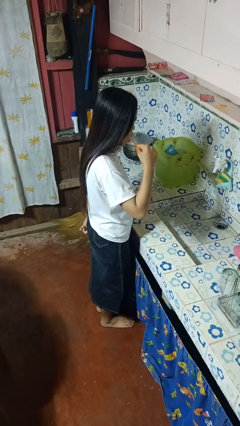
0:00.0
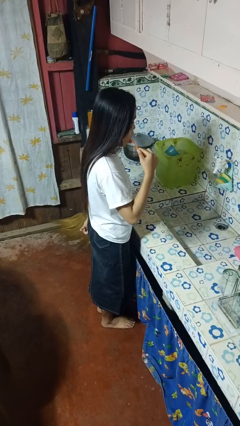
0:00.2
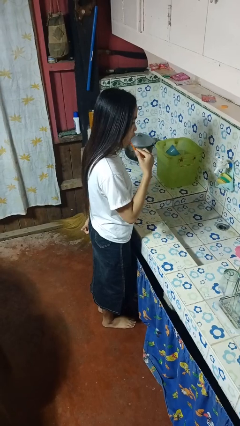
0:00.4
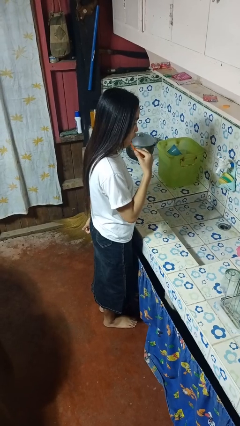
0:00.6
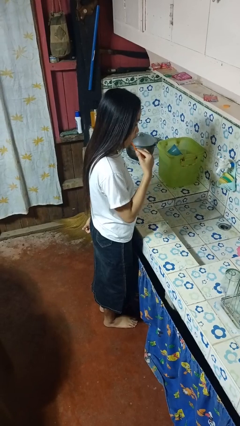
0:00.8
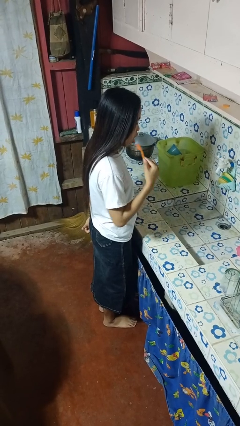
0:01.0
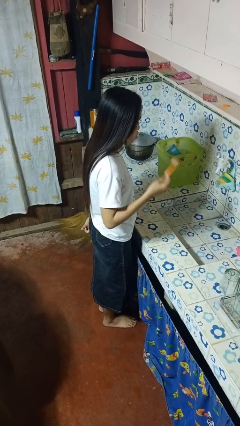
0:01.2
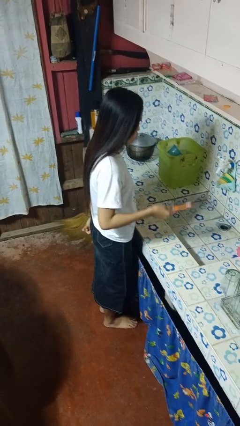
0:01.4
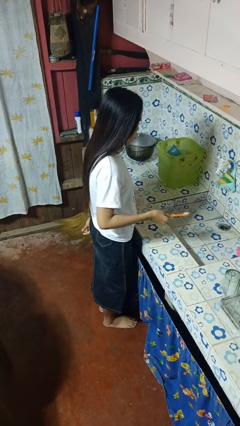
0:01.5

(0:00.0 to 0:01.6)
person brushes teeth

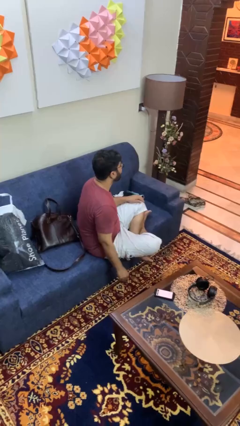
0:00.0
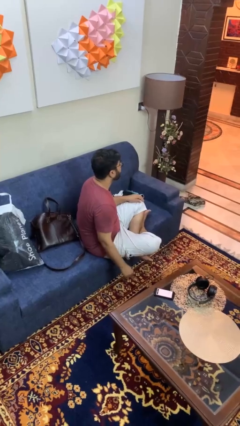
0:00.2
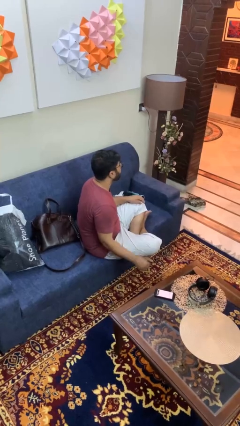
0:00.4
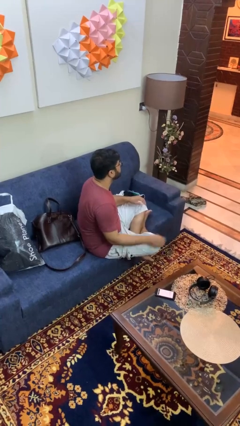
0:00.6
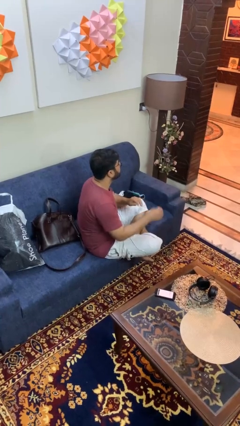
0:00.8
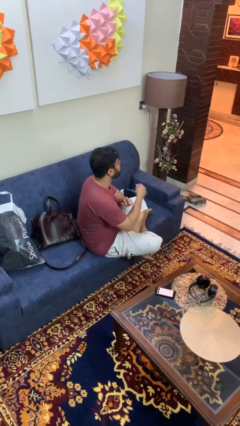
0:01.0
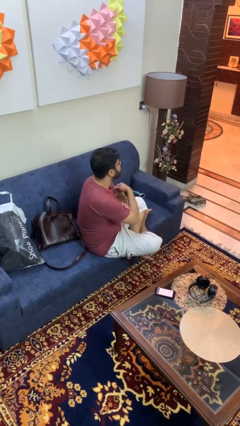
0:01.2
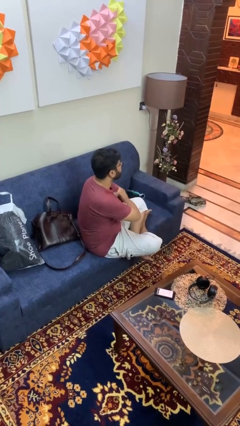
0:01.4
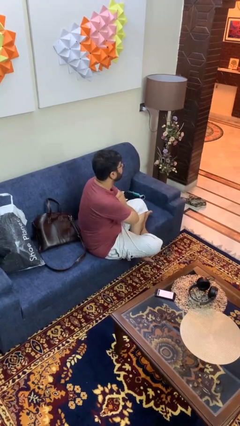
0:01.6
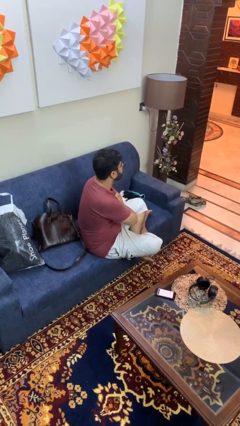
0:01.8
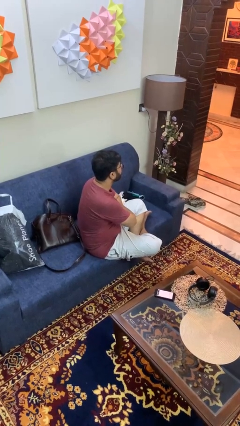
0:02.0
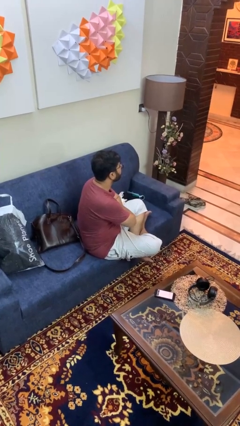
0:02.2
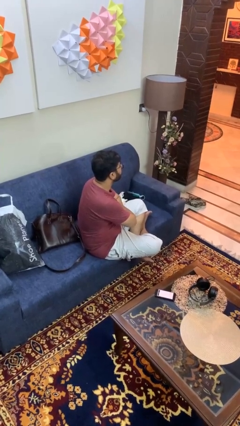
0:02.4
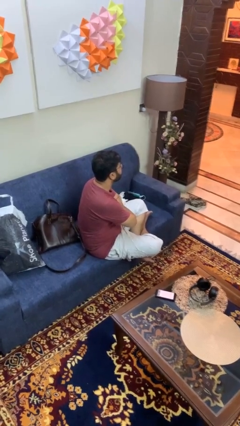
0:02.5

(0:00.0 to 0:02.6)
person crosses arms

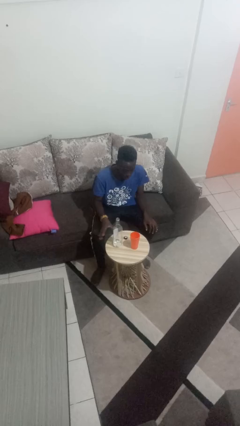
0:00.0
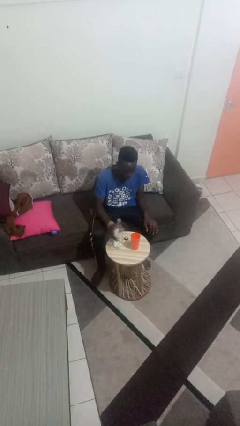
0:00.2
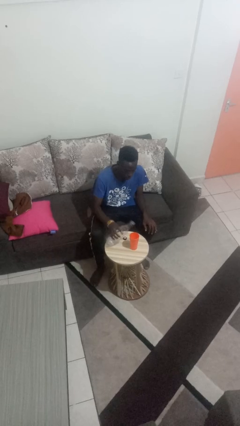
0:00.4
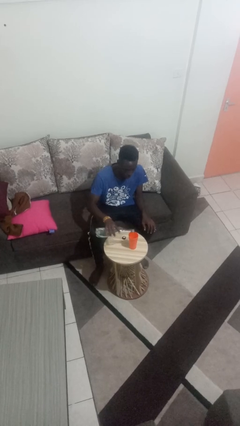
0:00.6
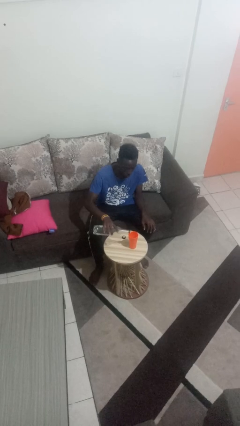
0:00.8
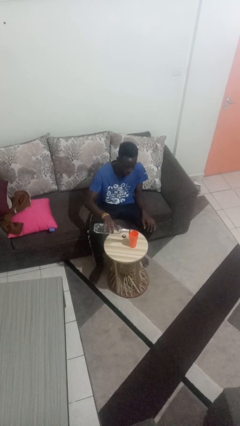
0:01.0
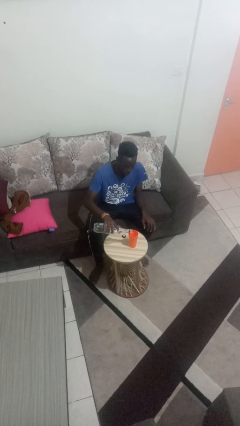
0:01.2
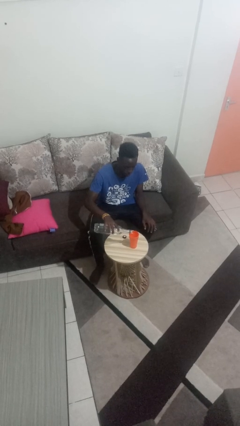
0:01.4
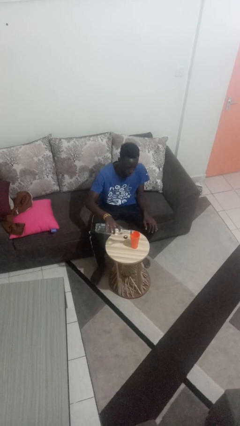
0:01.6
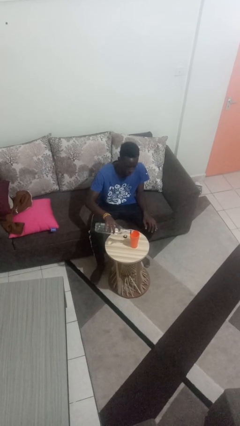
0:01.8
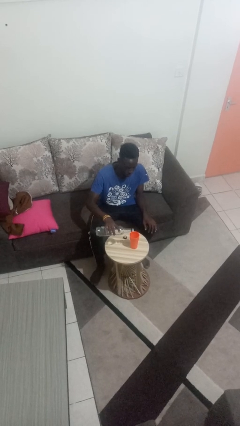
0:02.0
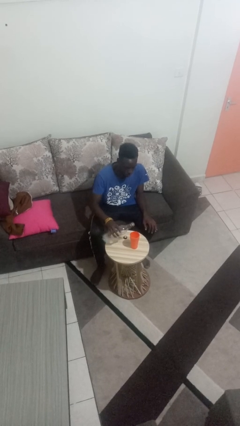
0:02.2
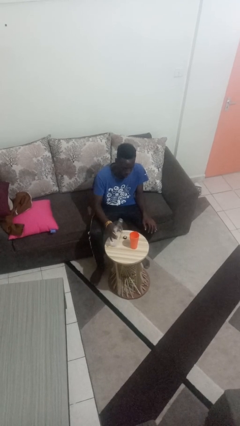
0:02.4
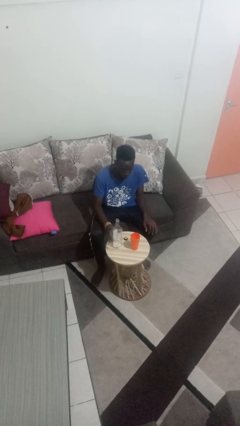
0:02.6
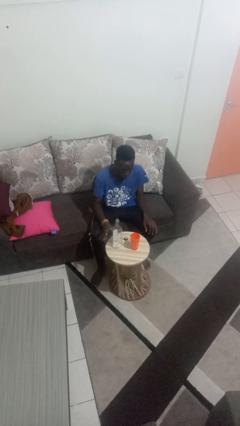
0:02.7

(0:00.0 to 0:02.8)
person pours liquid into cup

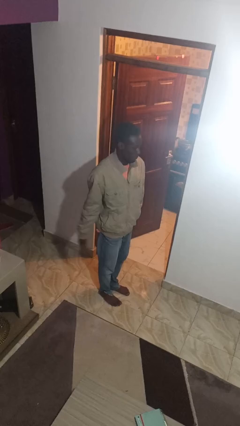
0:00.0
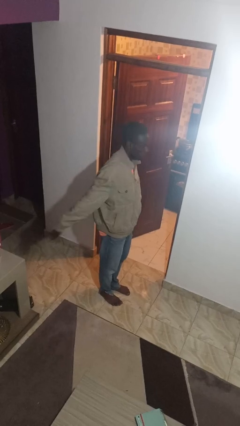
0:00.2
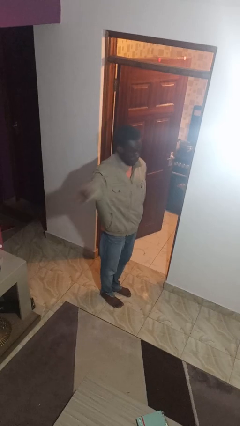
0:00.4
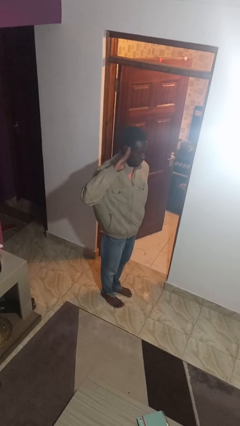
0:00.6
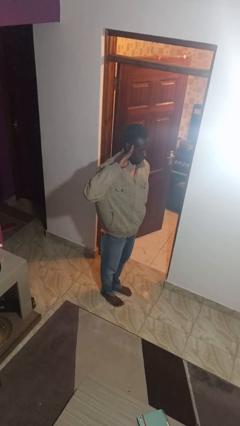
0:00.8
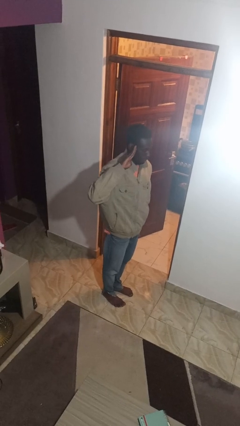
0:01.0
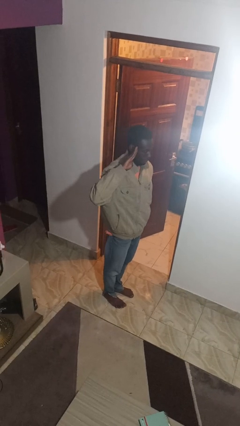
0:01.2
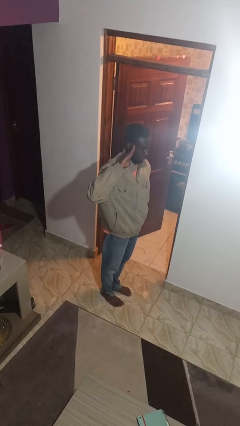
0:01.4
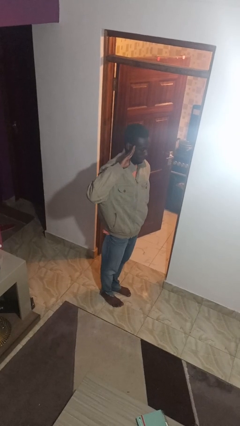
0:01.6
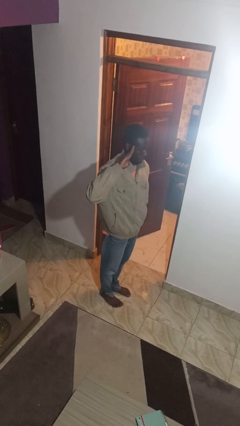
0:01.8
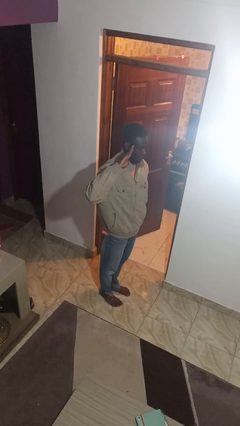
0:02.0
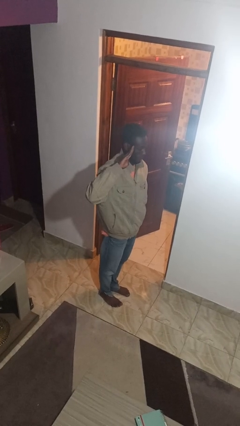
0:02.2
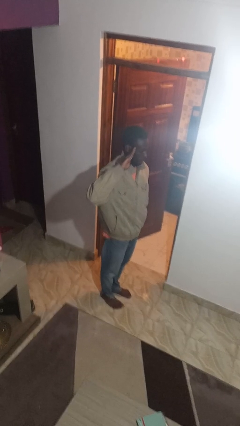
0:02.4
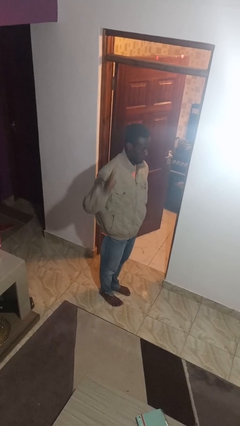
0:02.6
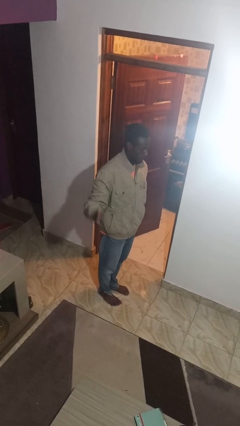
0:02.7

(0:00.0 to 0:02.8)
person salutes

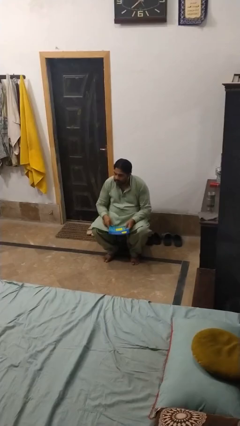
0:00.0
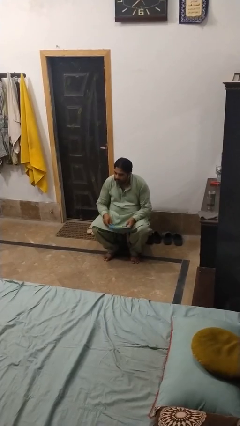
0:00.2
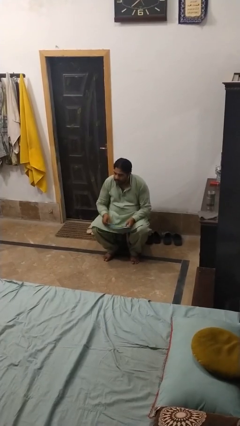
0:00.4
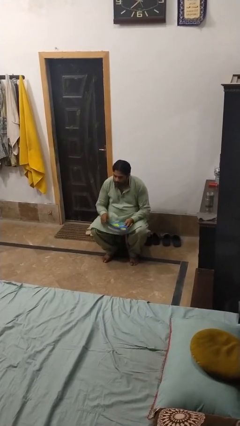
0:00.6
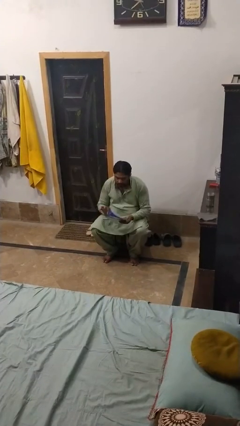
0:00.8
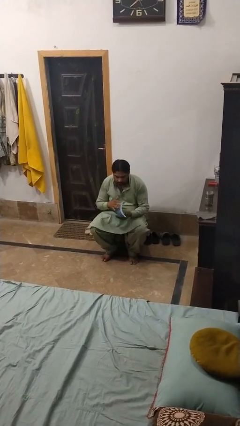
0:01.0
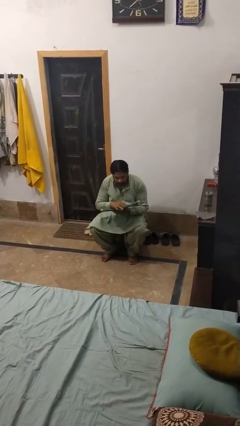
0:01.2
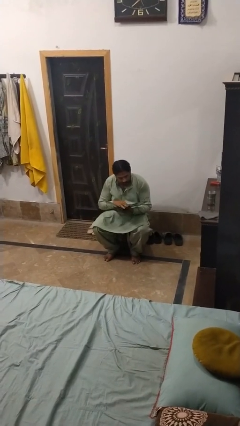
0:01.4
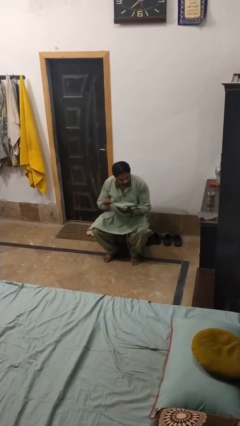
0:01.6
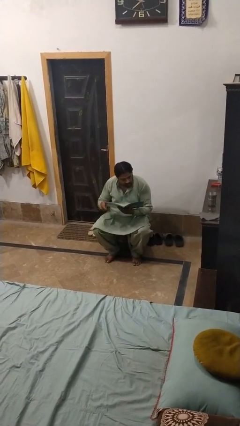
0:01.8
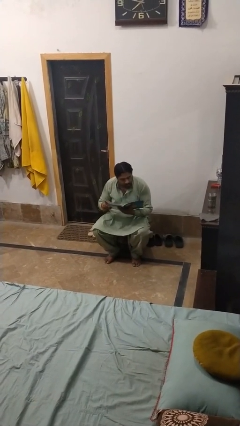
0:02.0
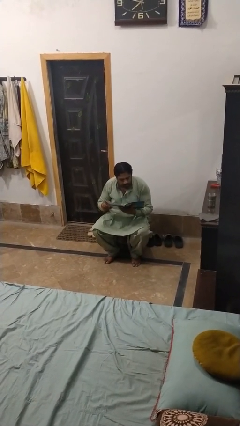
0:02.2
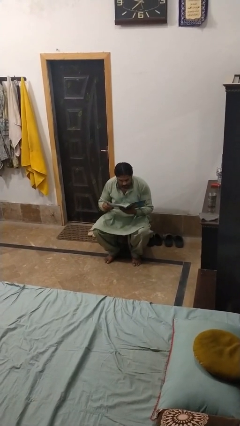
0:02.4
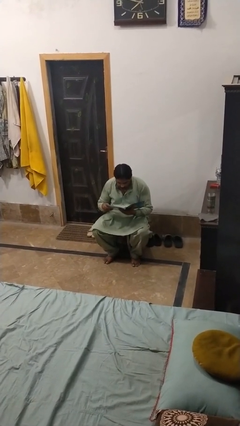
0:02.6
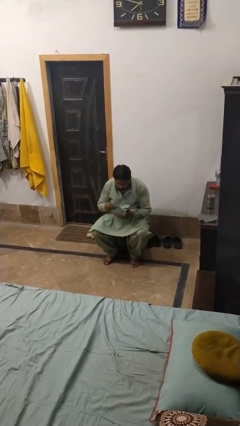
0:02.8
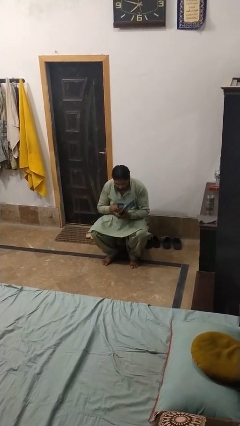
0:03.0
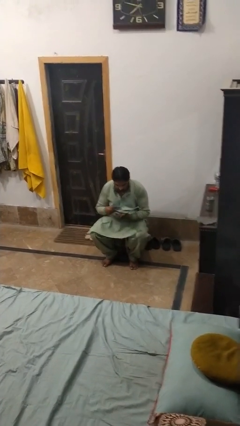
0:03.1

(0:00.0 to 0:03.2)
person reads magazine

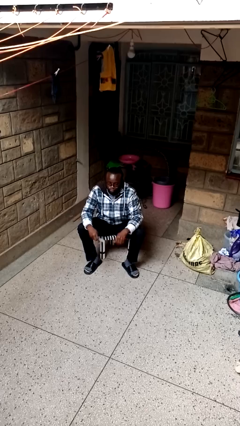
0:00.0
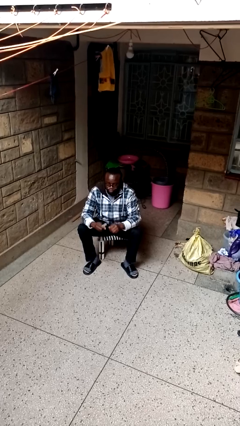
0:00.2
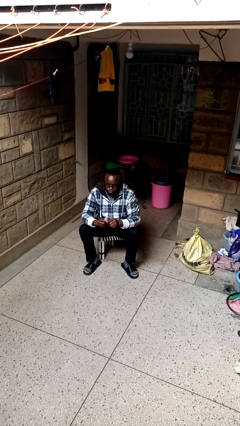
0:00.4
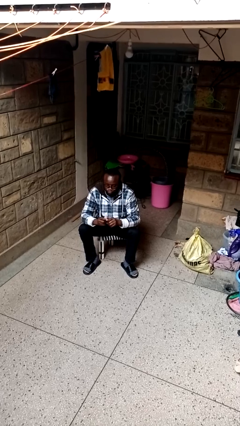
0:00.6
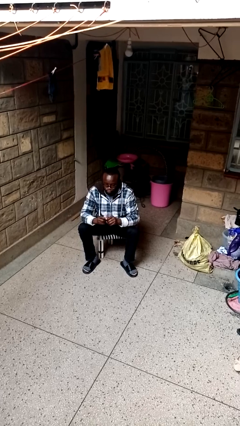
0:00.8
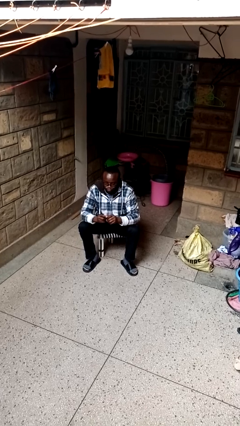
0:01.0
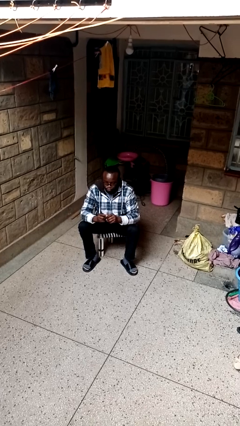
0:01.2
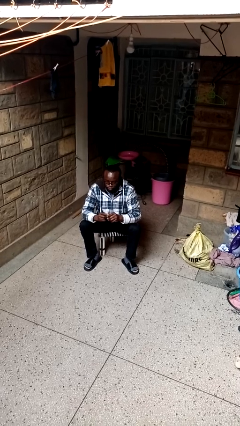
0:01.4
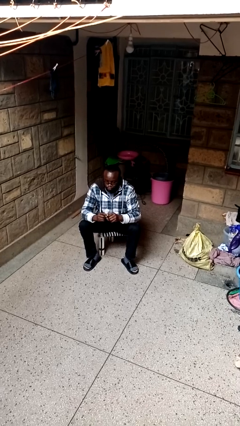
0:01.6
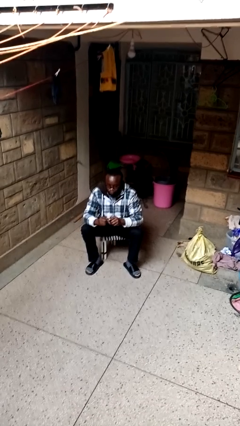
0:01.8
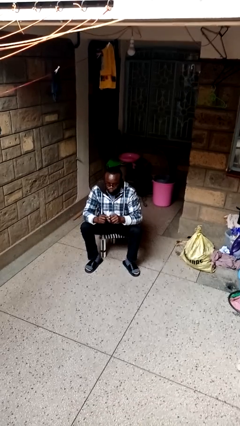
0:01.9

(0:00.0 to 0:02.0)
person files fingernails

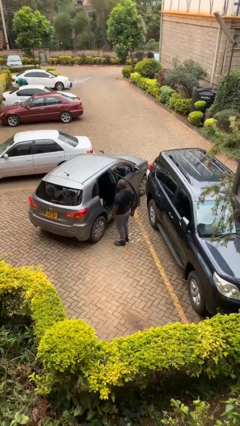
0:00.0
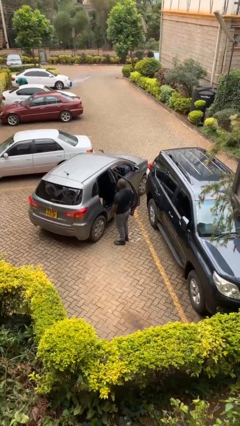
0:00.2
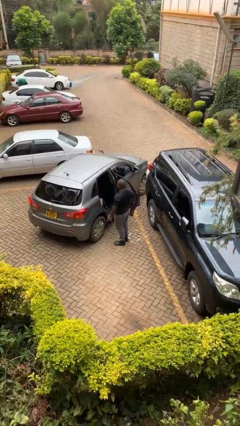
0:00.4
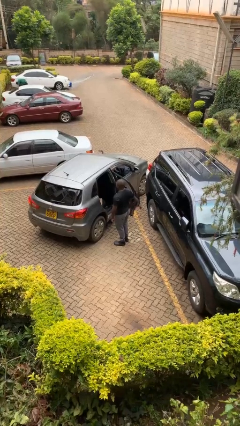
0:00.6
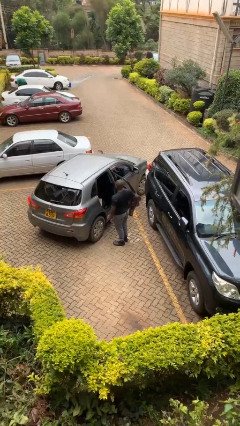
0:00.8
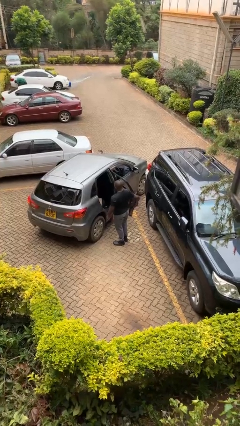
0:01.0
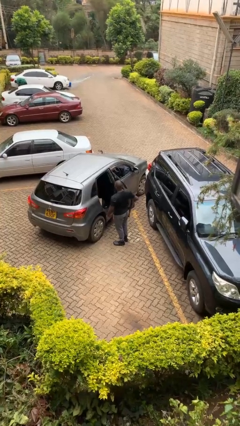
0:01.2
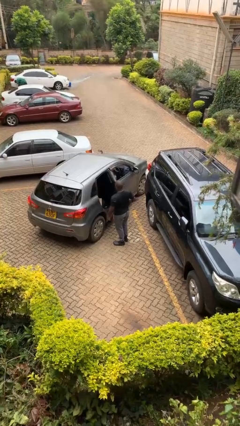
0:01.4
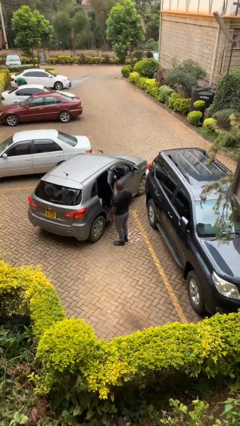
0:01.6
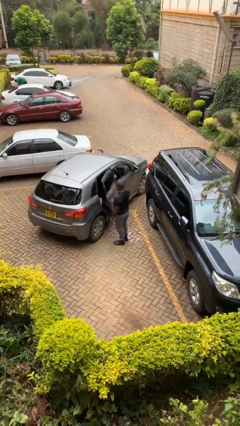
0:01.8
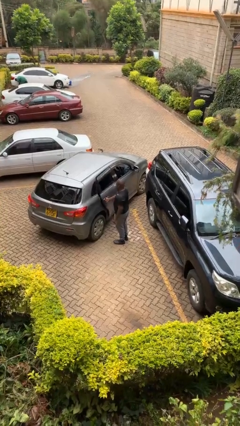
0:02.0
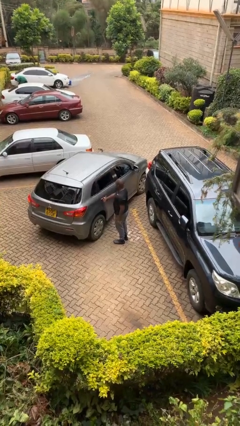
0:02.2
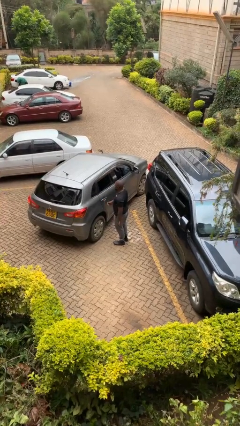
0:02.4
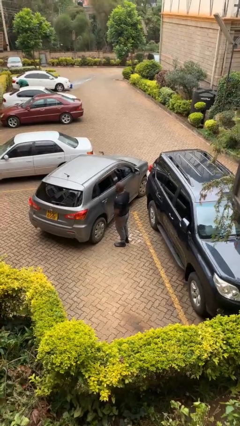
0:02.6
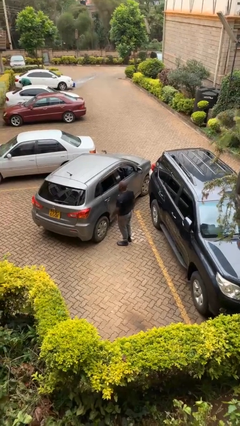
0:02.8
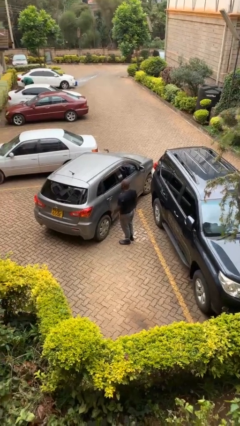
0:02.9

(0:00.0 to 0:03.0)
person closes car door
